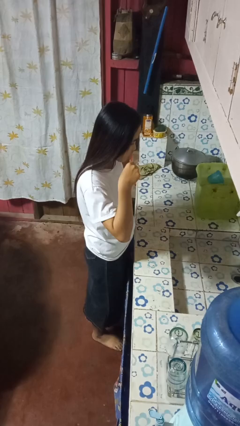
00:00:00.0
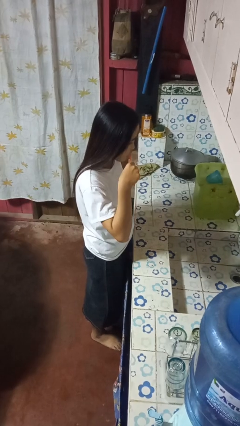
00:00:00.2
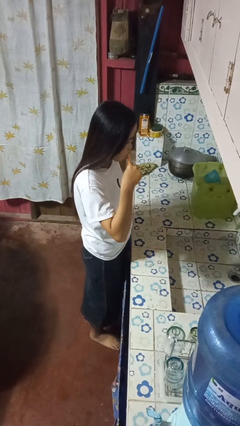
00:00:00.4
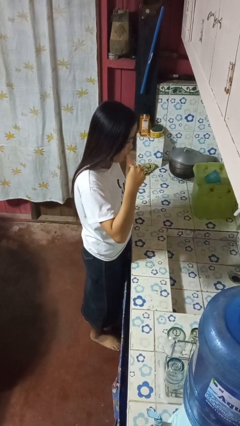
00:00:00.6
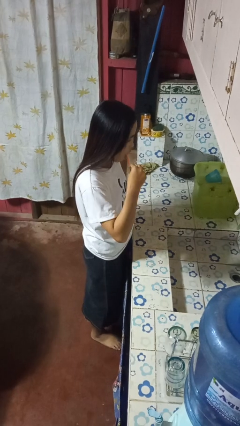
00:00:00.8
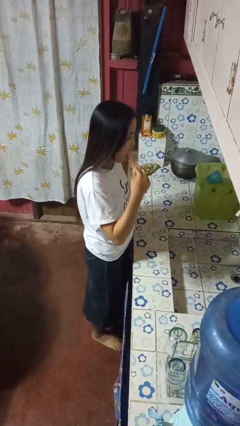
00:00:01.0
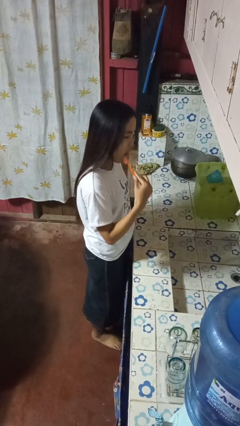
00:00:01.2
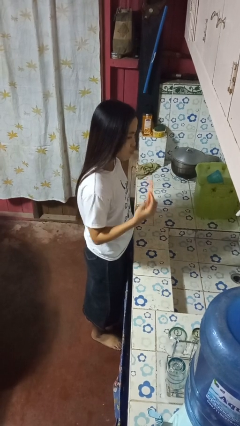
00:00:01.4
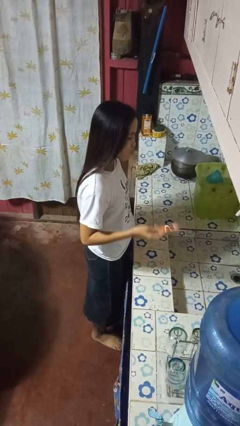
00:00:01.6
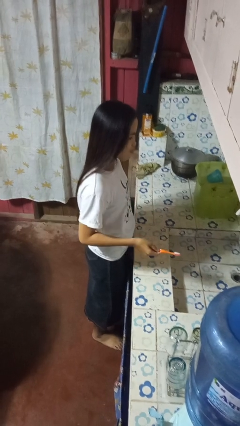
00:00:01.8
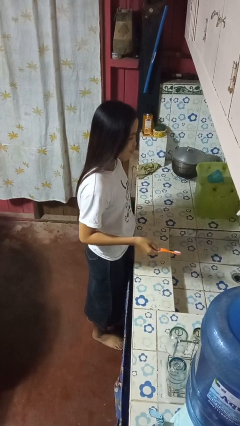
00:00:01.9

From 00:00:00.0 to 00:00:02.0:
person brushes teeth

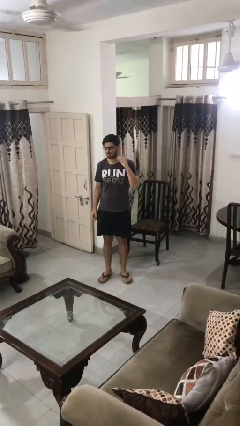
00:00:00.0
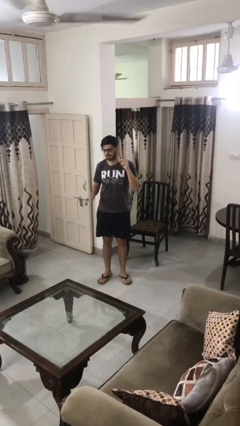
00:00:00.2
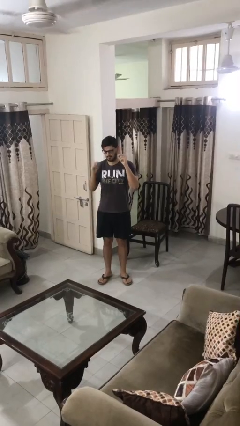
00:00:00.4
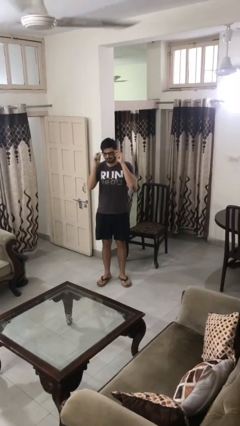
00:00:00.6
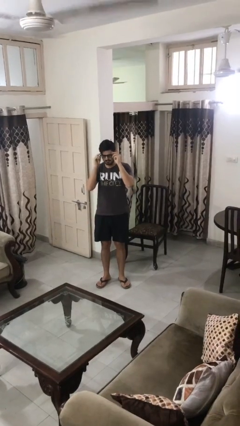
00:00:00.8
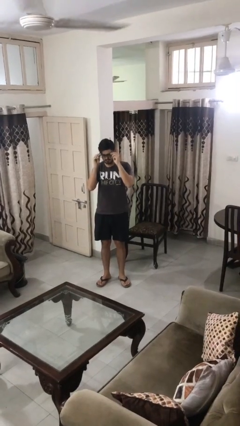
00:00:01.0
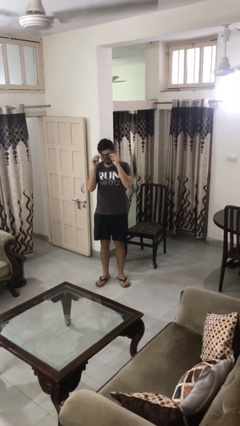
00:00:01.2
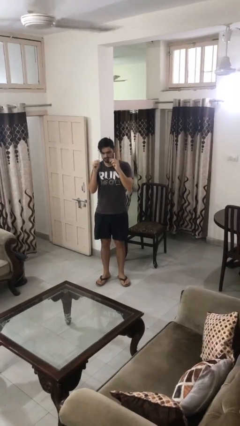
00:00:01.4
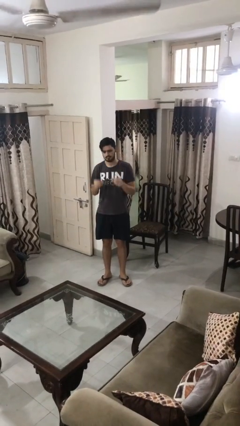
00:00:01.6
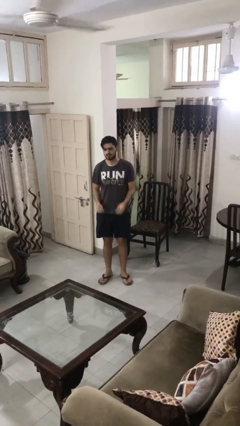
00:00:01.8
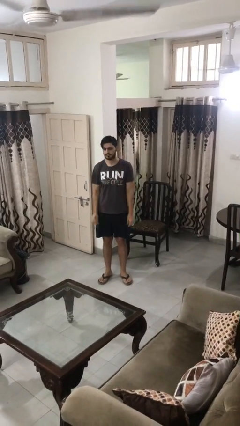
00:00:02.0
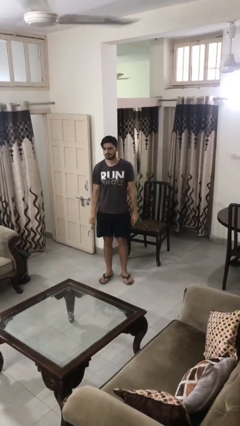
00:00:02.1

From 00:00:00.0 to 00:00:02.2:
person takes off glasses

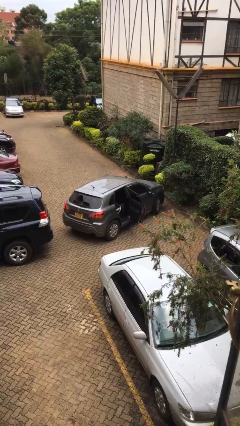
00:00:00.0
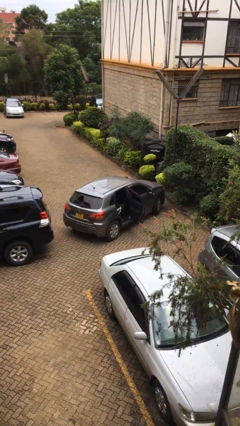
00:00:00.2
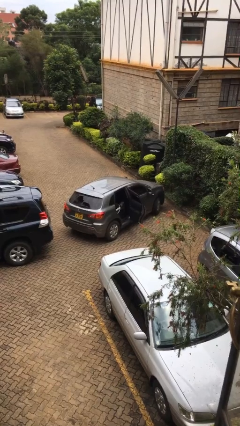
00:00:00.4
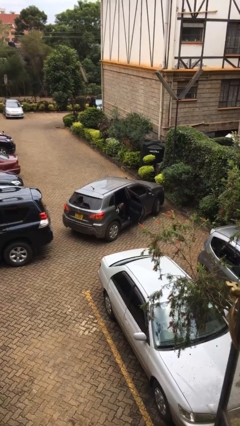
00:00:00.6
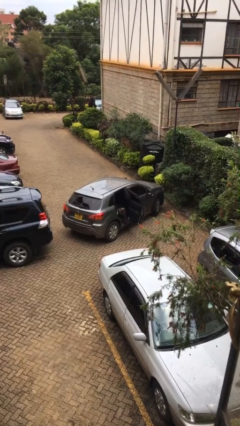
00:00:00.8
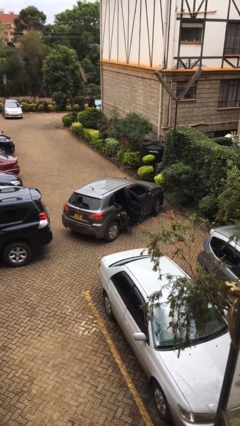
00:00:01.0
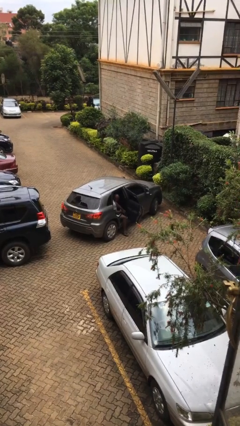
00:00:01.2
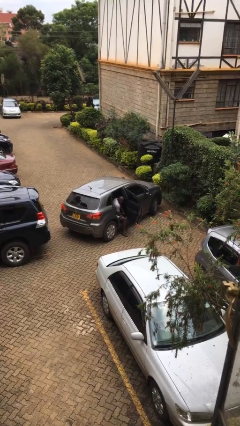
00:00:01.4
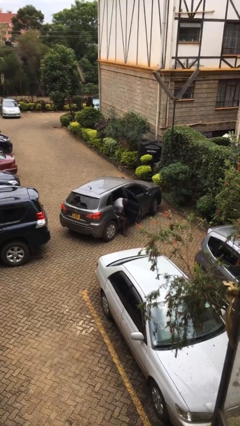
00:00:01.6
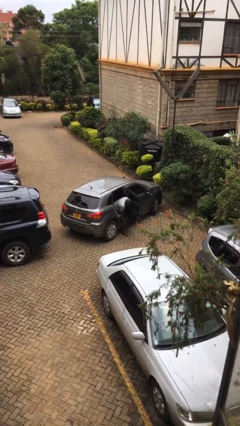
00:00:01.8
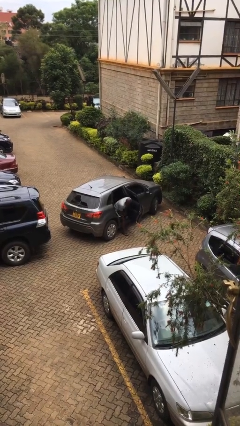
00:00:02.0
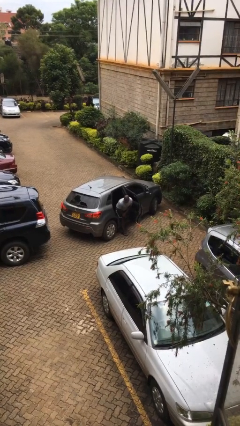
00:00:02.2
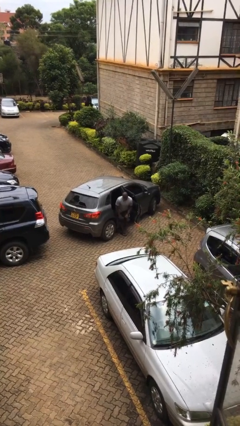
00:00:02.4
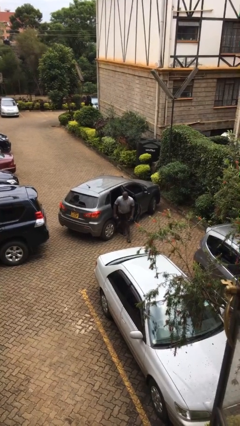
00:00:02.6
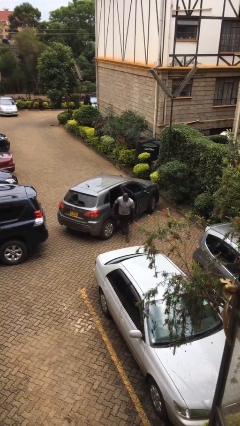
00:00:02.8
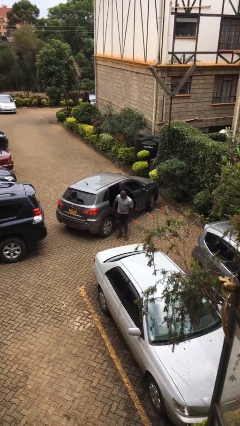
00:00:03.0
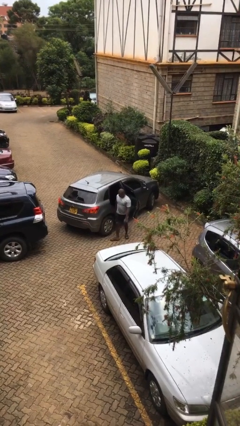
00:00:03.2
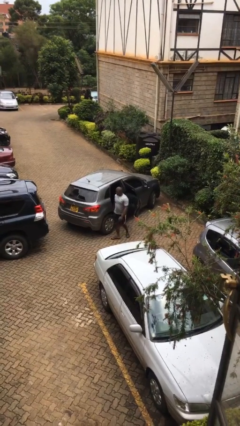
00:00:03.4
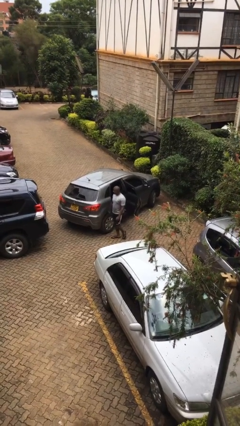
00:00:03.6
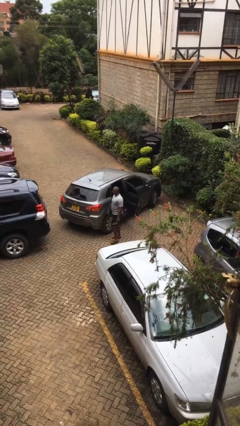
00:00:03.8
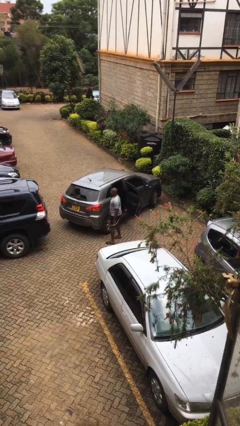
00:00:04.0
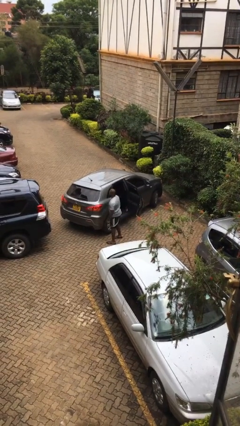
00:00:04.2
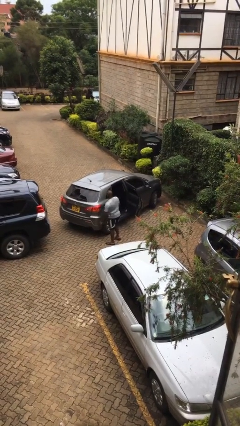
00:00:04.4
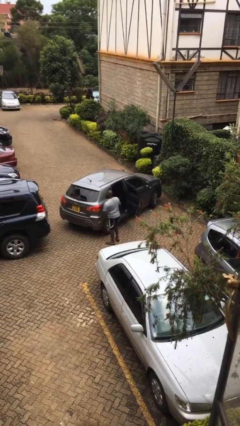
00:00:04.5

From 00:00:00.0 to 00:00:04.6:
person exits car

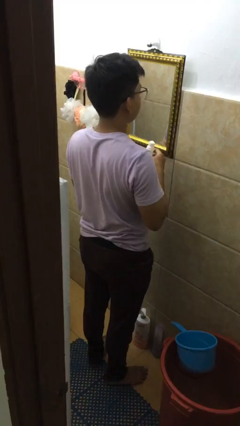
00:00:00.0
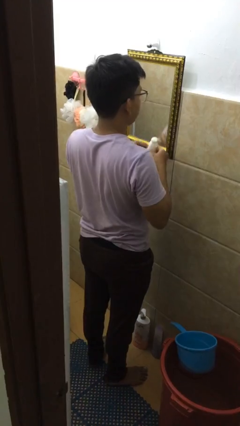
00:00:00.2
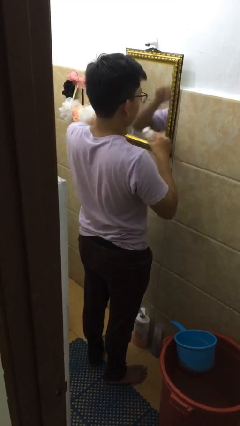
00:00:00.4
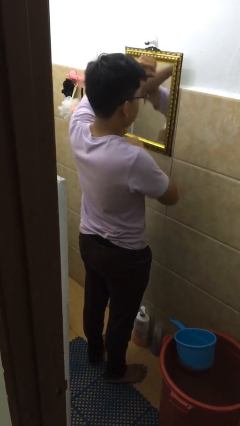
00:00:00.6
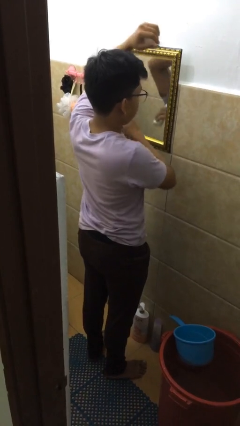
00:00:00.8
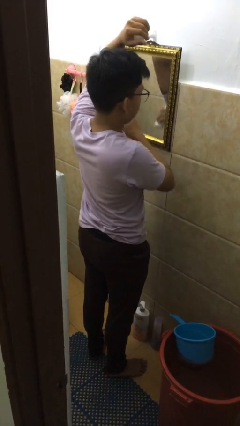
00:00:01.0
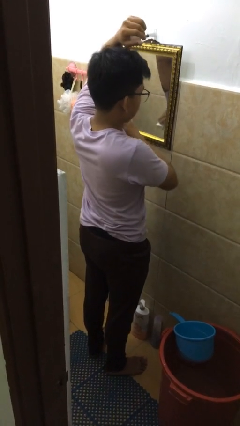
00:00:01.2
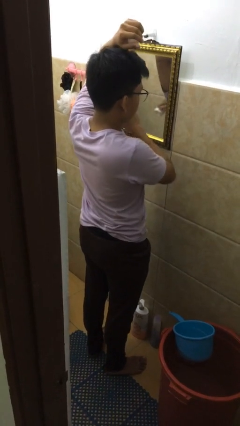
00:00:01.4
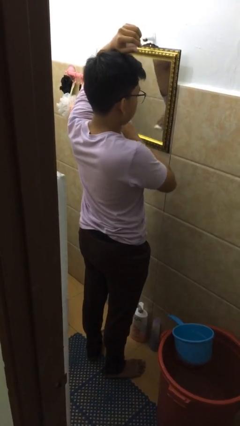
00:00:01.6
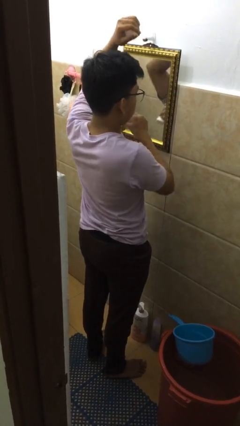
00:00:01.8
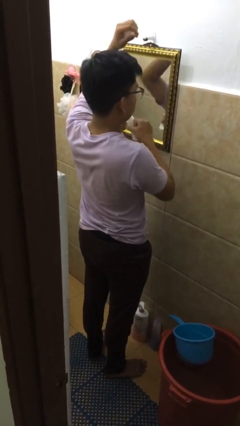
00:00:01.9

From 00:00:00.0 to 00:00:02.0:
person applies deodorant

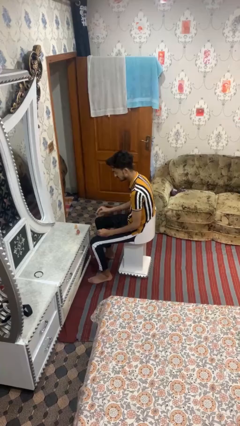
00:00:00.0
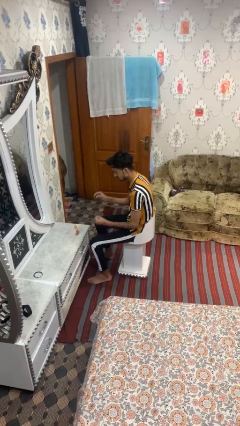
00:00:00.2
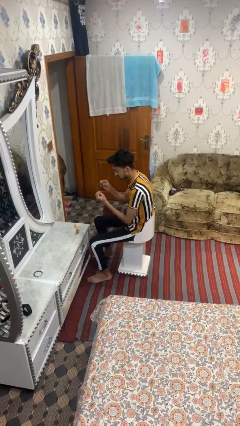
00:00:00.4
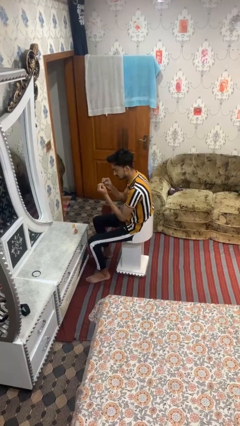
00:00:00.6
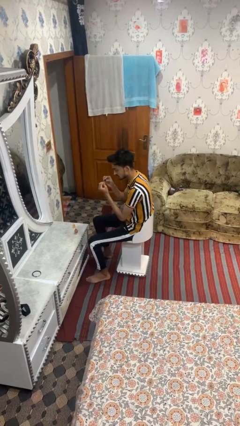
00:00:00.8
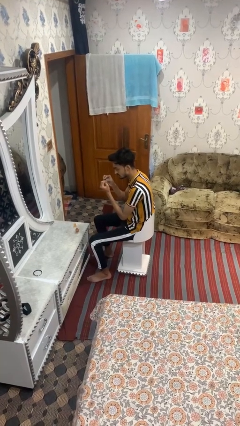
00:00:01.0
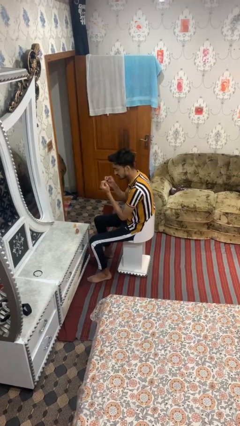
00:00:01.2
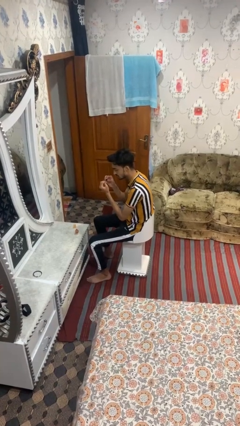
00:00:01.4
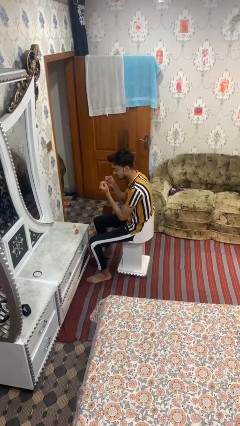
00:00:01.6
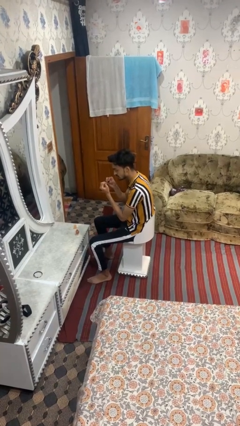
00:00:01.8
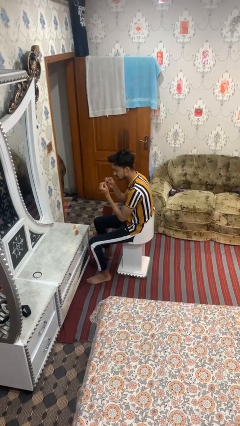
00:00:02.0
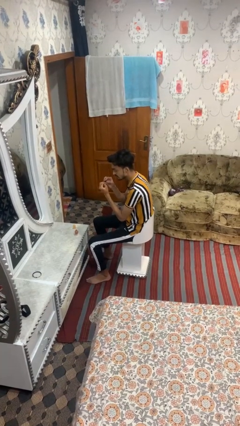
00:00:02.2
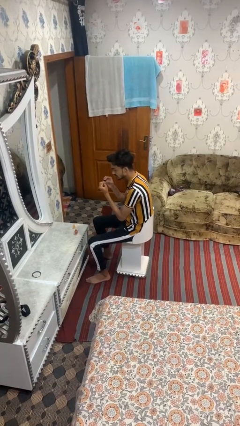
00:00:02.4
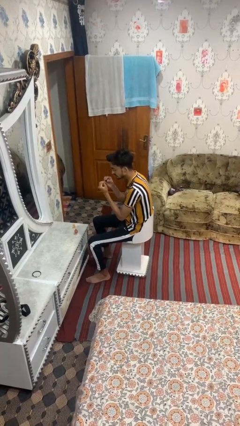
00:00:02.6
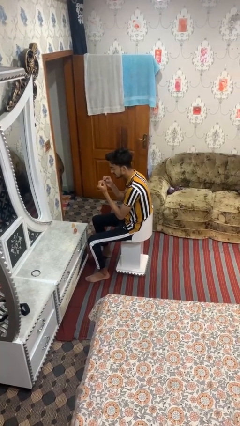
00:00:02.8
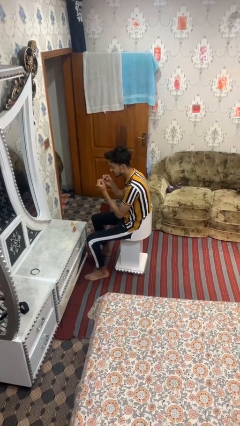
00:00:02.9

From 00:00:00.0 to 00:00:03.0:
person paints fingernails

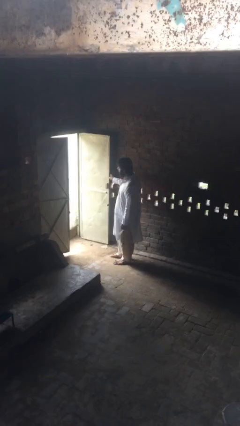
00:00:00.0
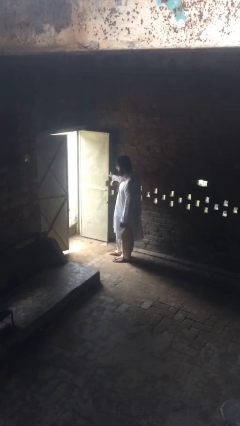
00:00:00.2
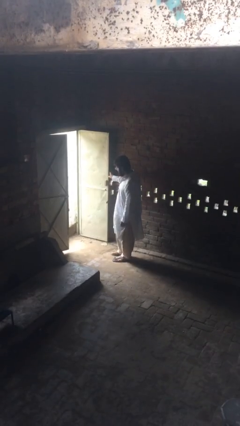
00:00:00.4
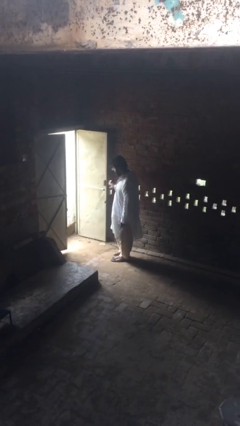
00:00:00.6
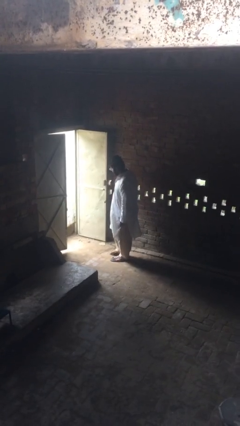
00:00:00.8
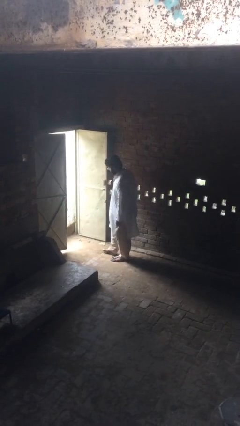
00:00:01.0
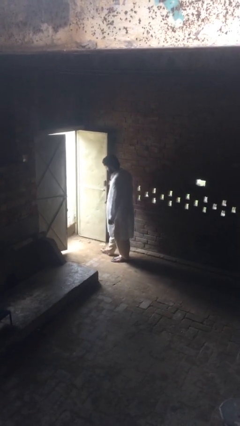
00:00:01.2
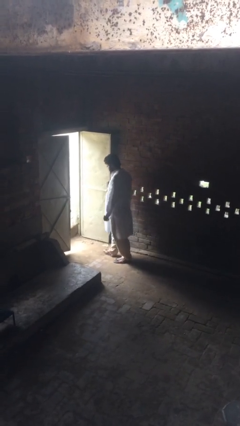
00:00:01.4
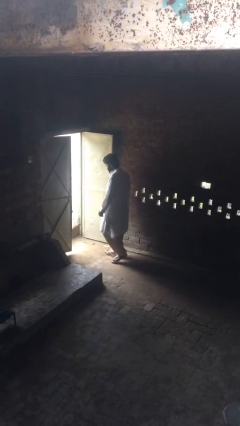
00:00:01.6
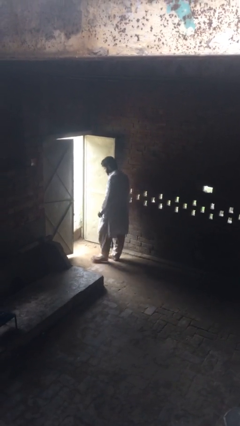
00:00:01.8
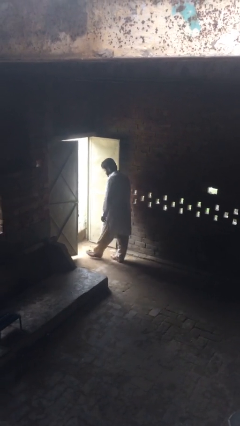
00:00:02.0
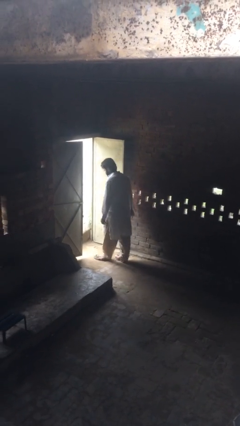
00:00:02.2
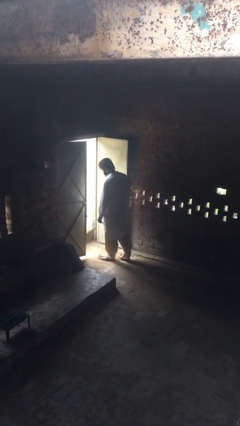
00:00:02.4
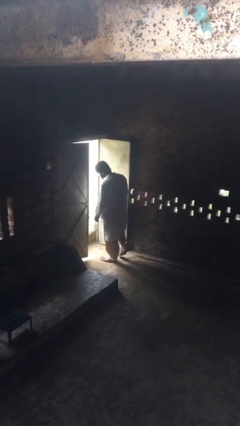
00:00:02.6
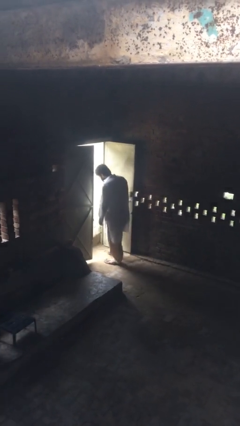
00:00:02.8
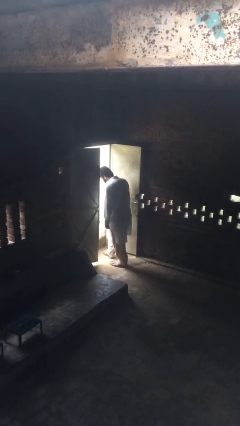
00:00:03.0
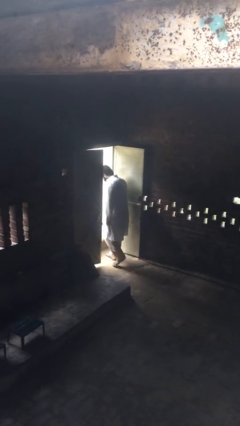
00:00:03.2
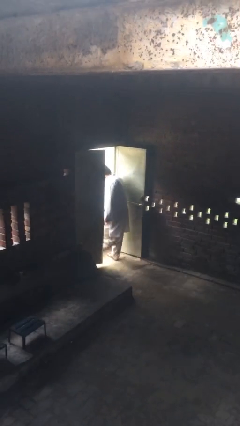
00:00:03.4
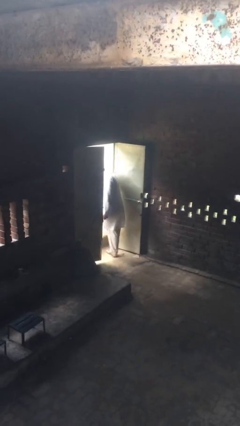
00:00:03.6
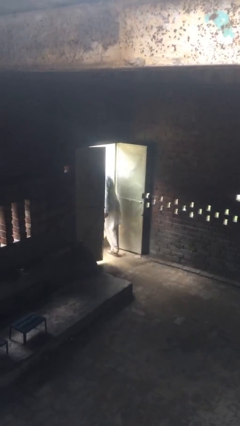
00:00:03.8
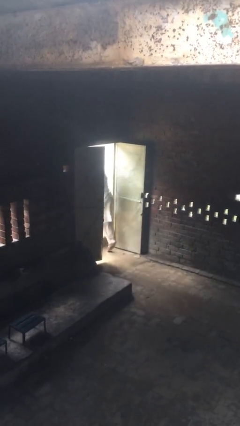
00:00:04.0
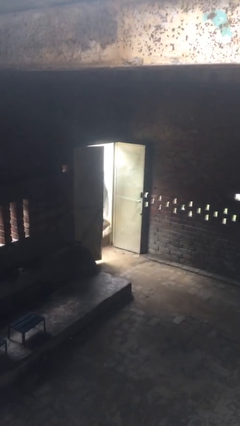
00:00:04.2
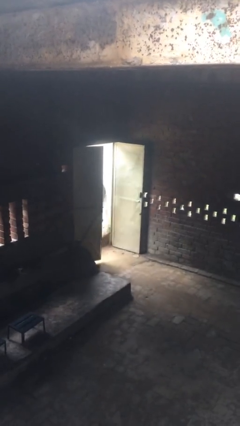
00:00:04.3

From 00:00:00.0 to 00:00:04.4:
person exits scene through structure
